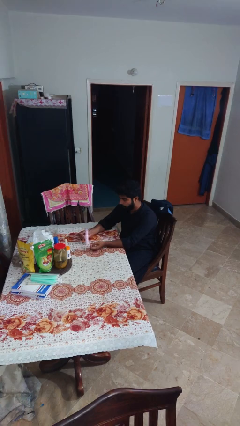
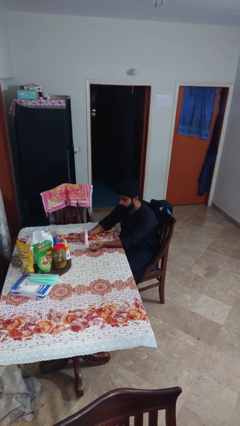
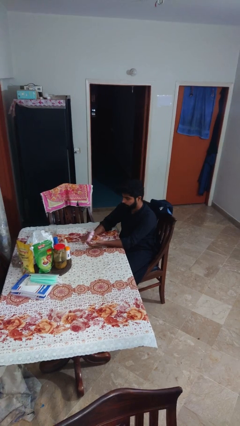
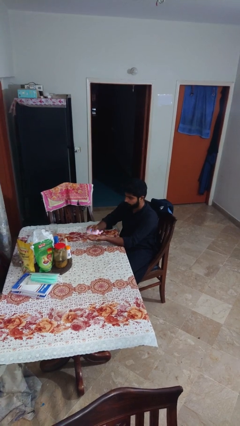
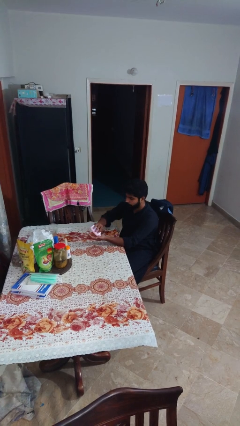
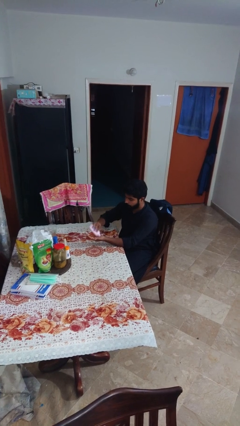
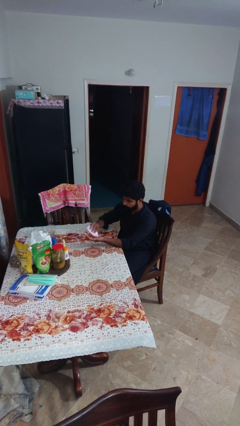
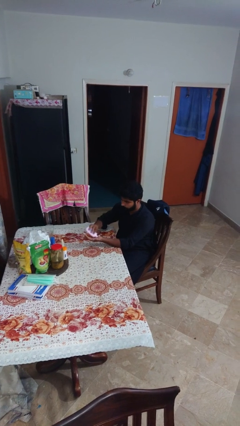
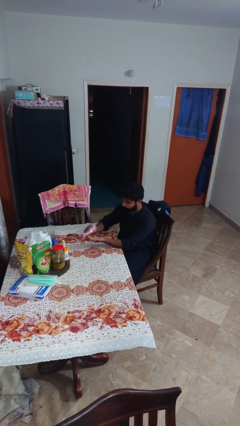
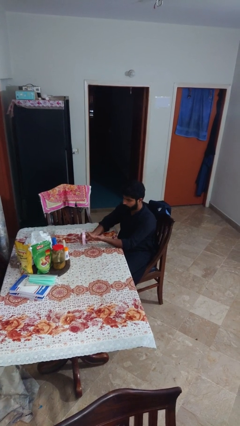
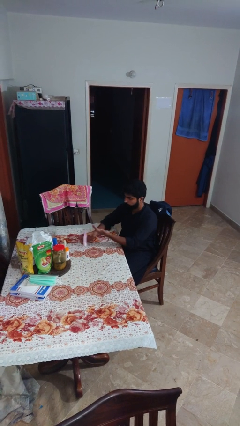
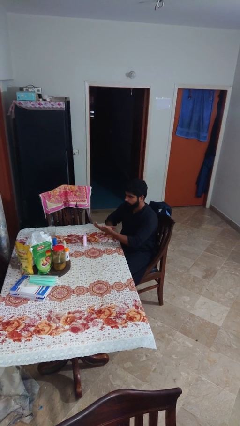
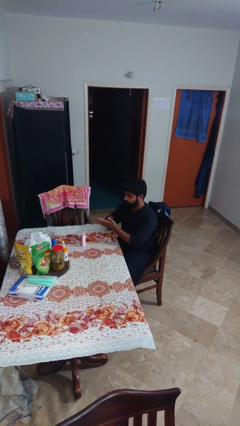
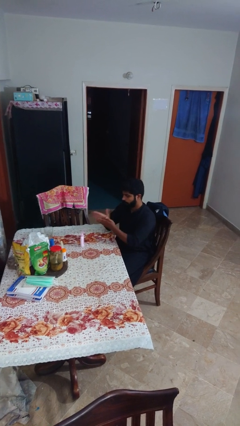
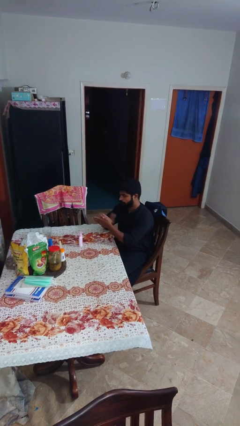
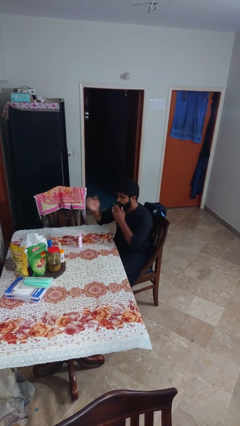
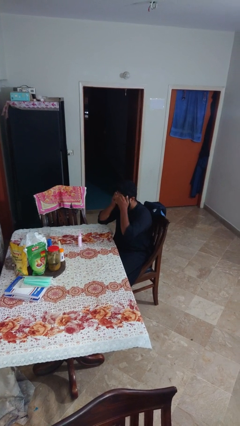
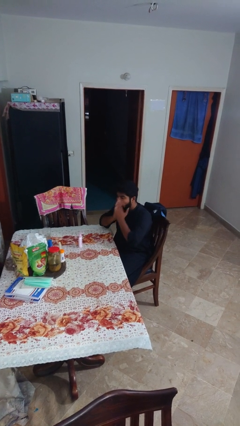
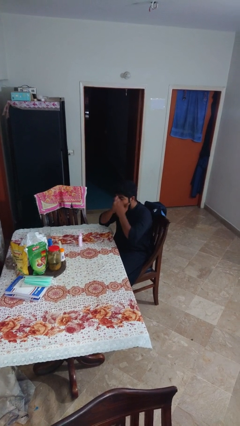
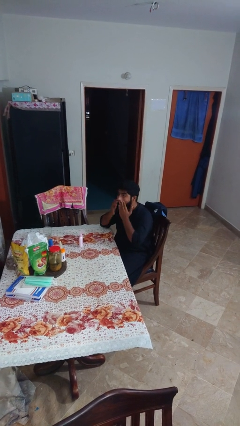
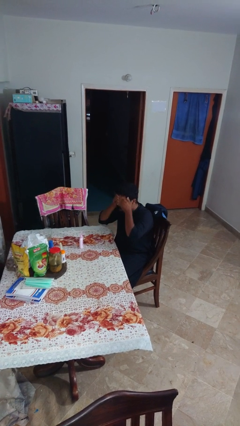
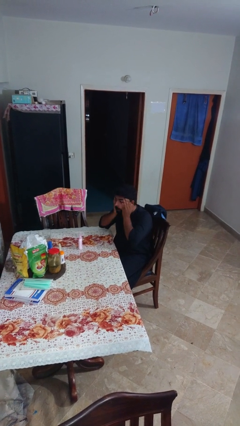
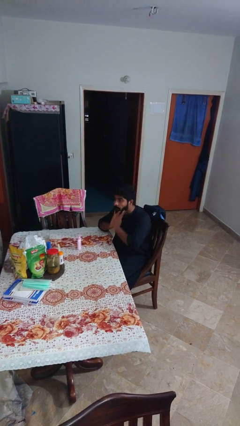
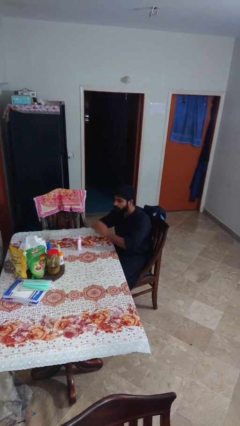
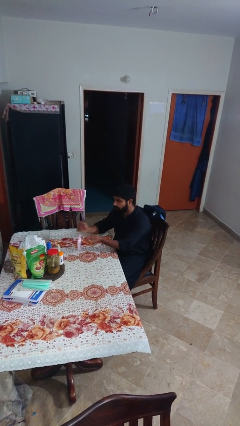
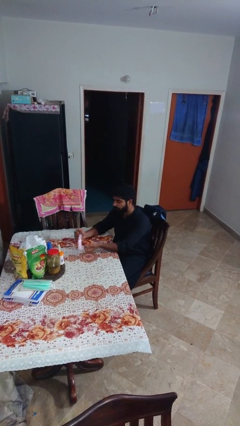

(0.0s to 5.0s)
person applies facial moisturizer

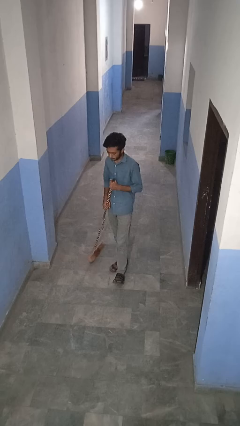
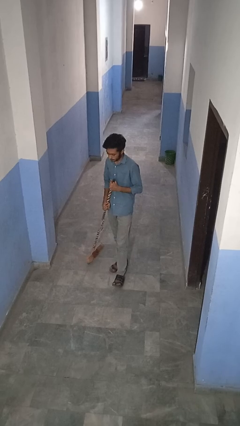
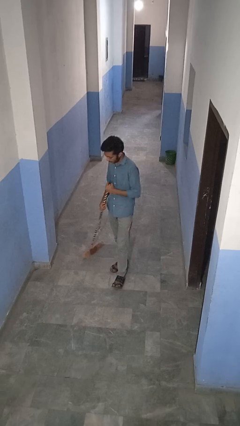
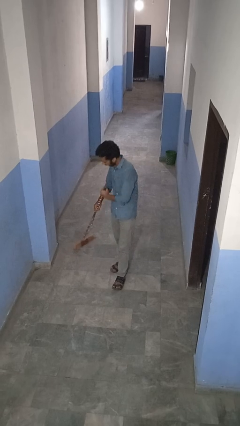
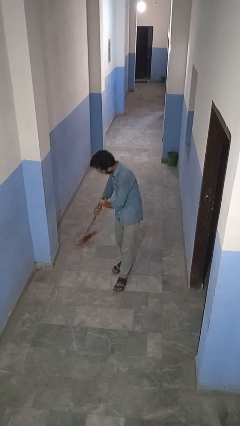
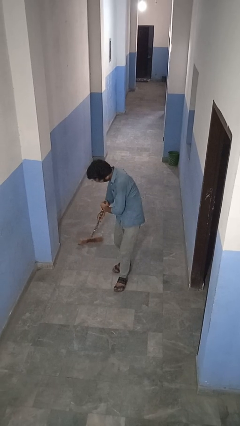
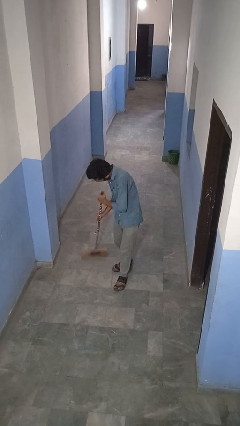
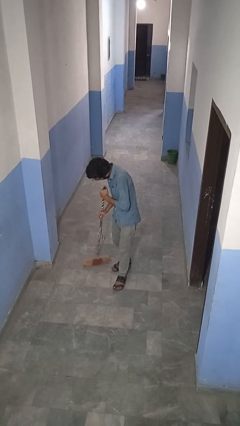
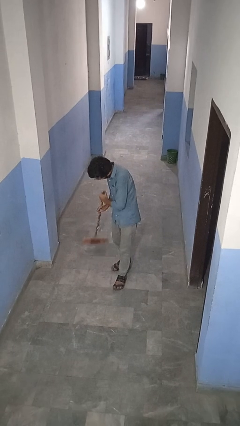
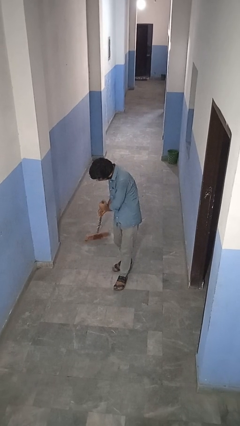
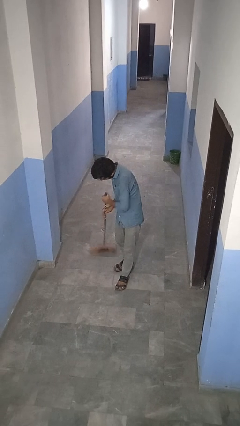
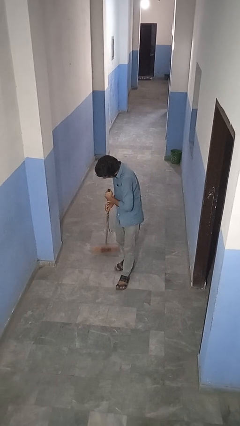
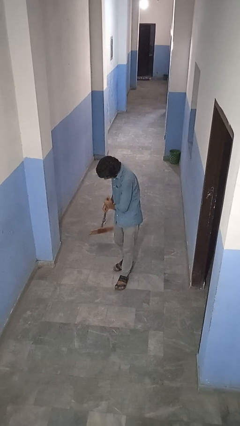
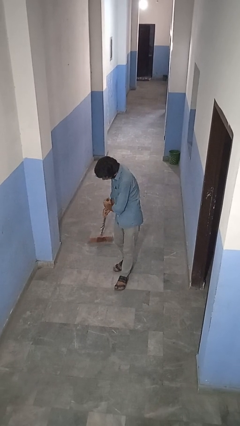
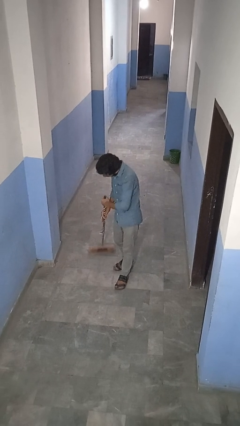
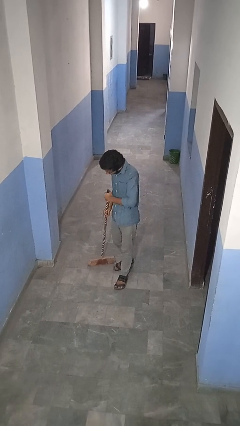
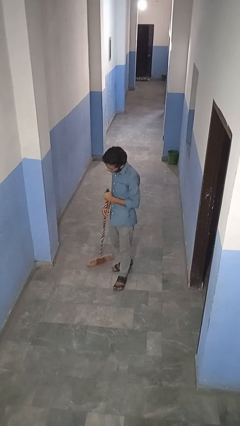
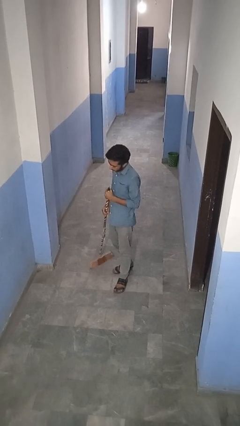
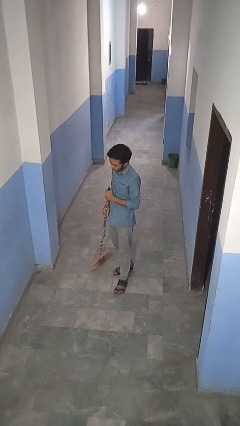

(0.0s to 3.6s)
person sweeps floor

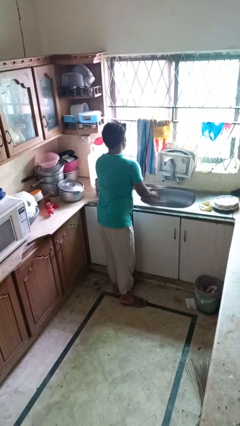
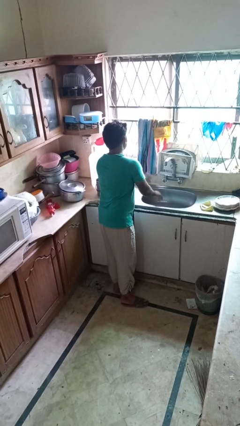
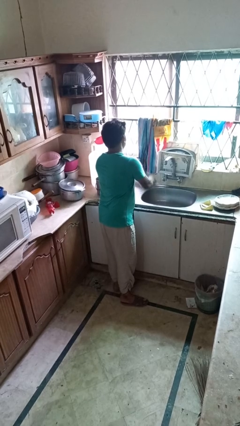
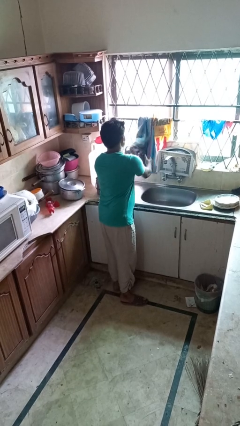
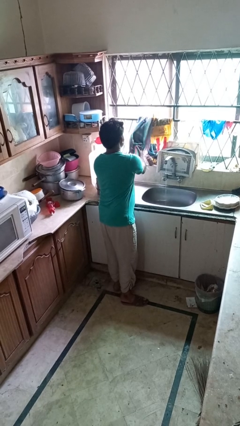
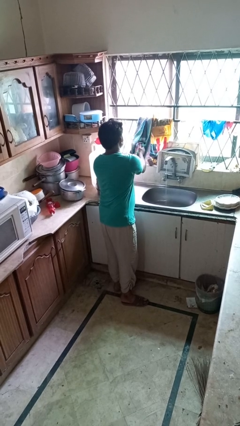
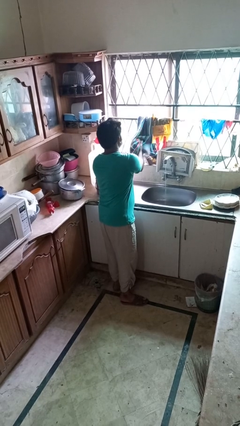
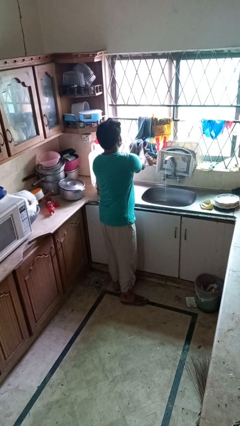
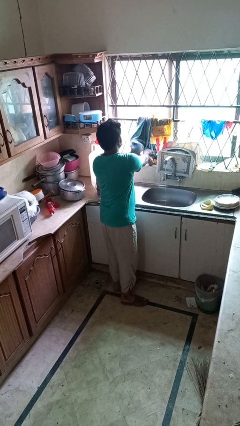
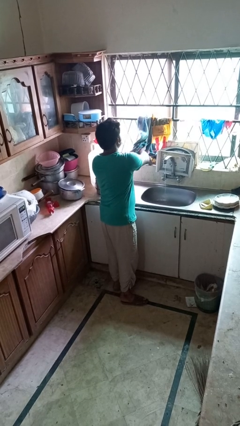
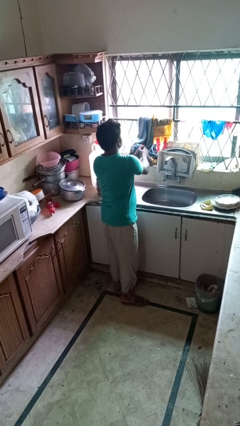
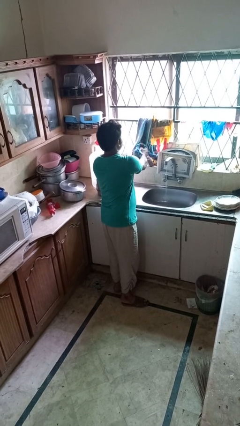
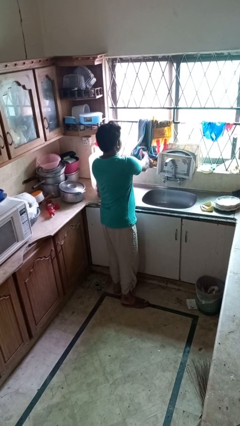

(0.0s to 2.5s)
person dries hands with towel

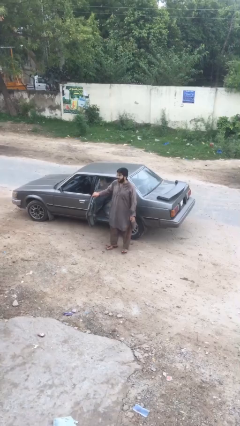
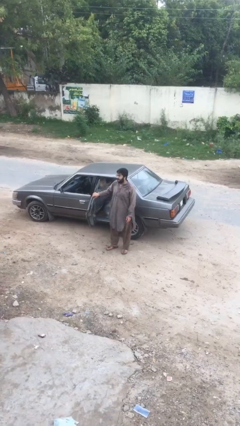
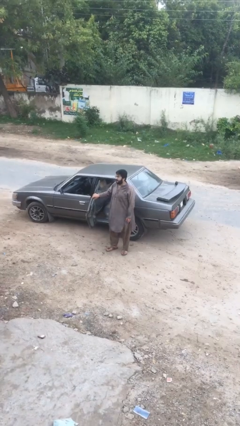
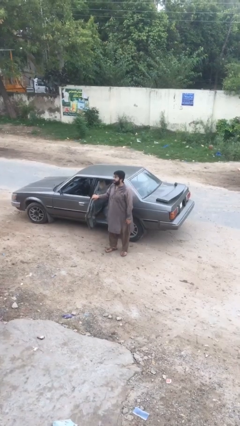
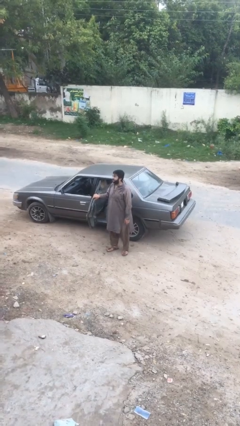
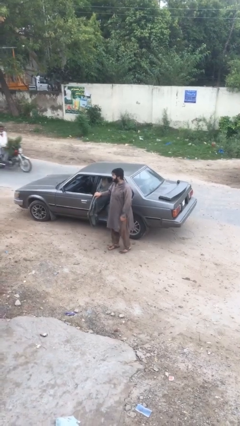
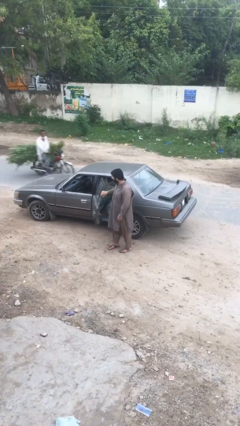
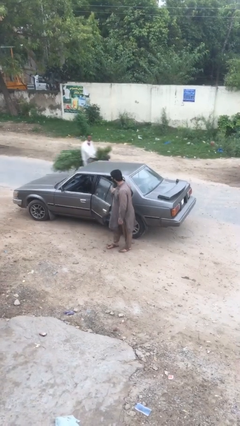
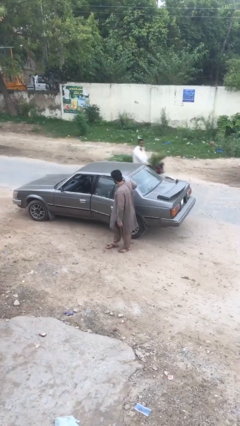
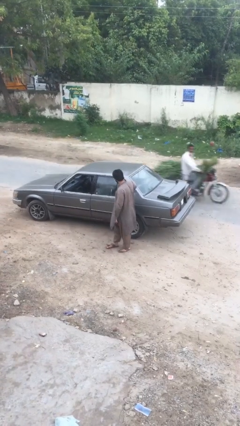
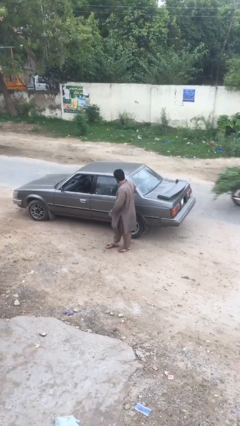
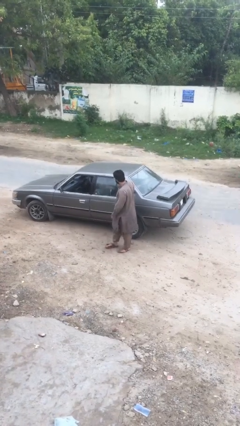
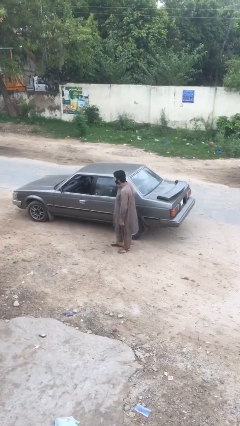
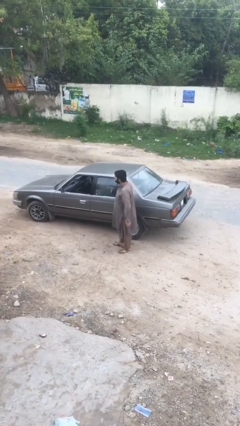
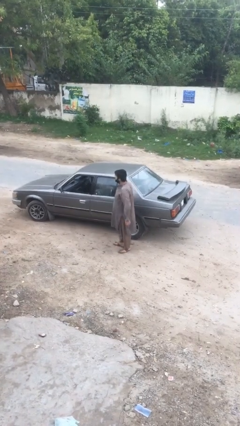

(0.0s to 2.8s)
person closes car door

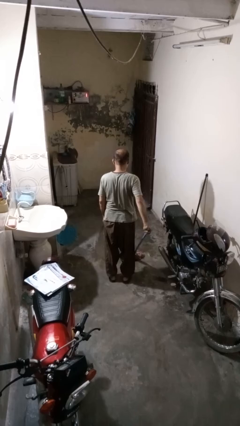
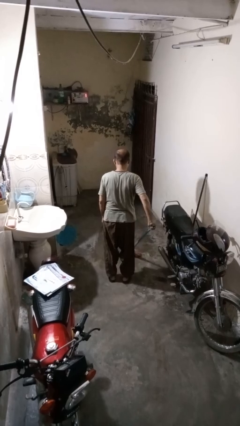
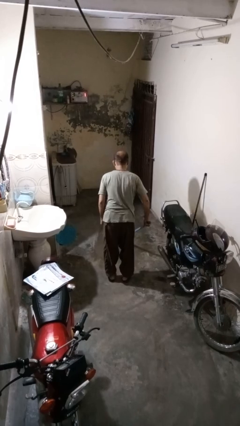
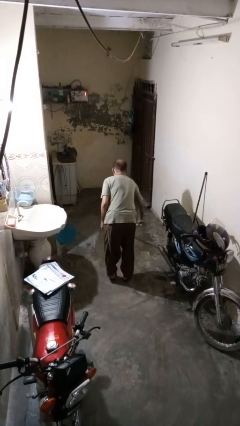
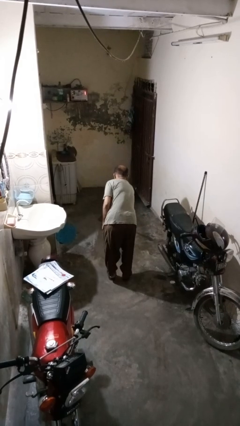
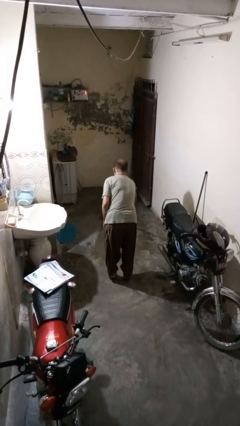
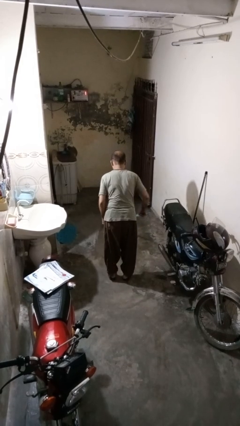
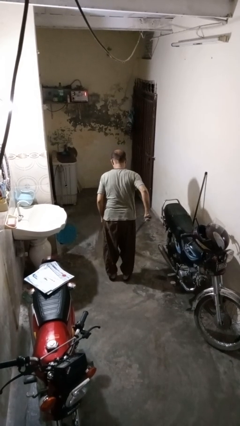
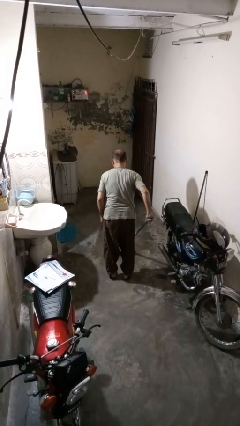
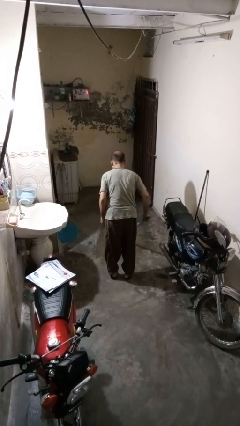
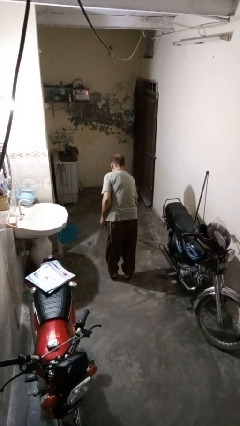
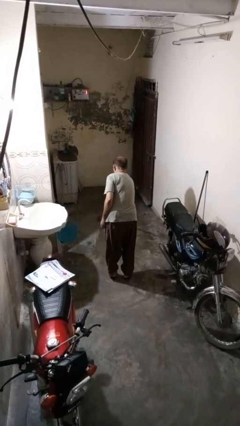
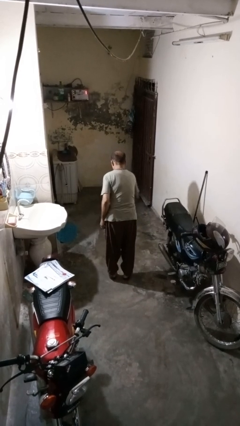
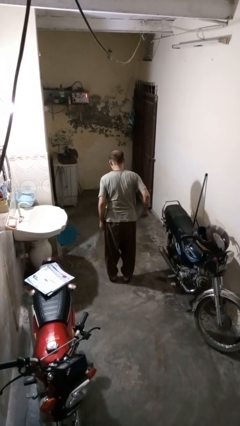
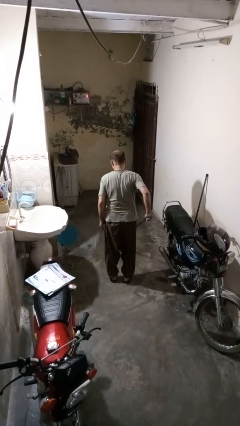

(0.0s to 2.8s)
person mops

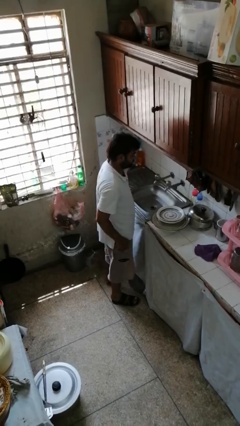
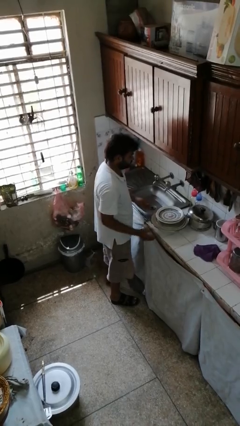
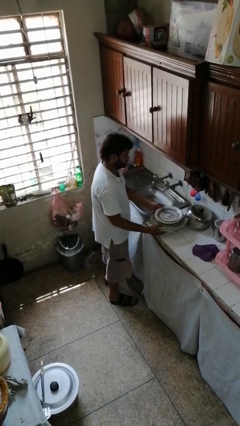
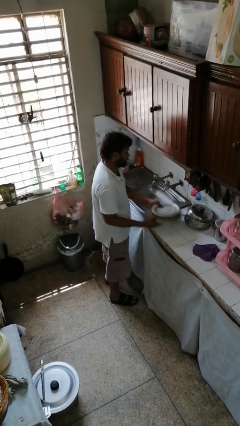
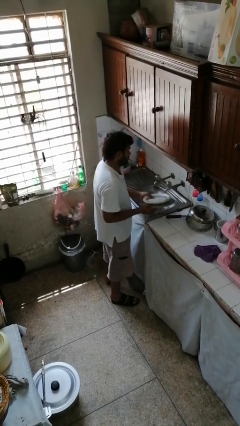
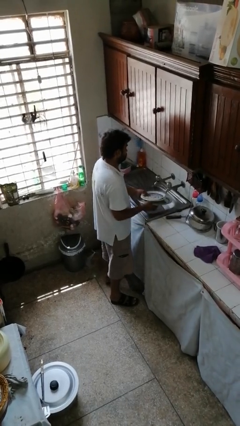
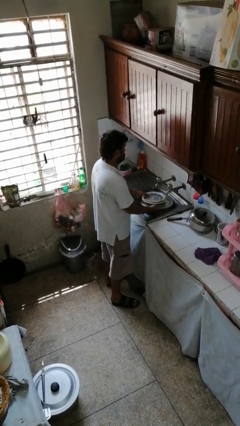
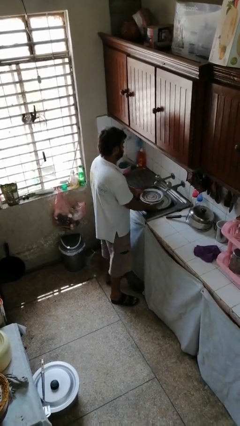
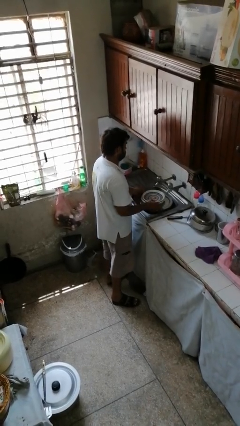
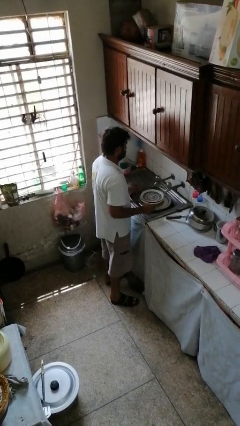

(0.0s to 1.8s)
person loads dishwasher
